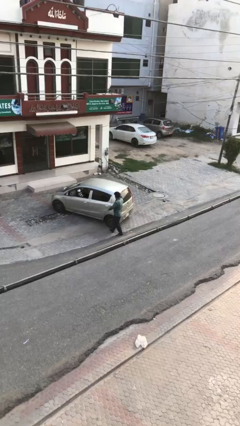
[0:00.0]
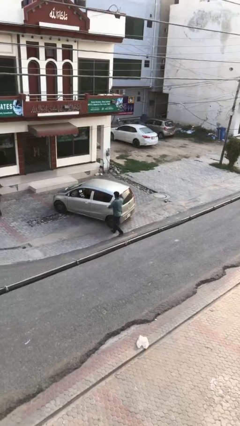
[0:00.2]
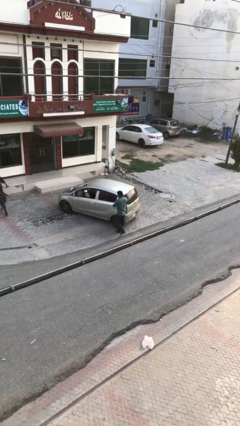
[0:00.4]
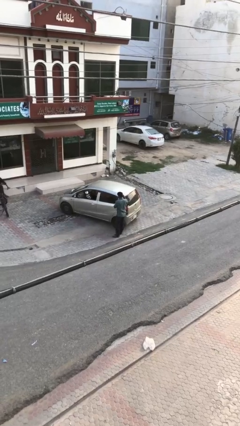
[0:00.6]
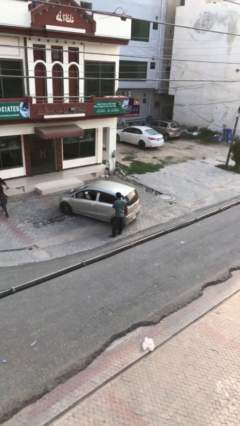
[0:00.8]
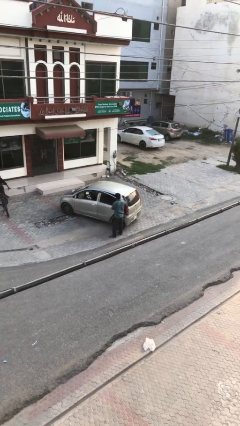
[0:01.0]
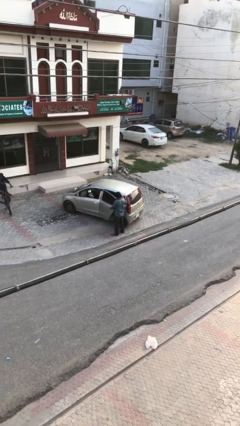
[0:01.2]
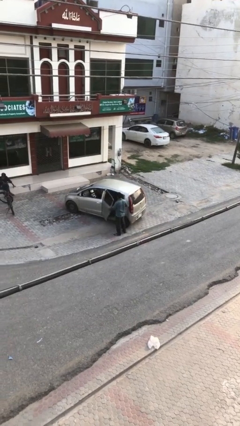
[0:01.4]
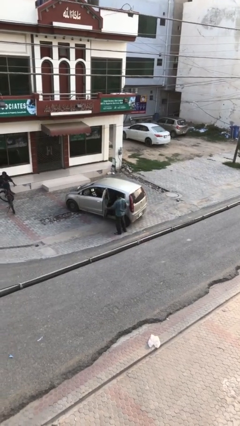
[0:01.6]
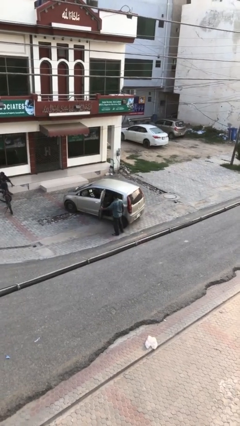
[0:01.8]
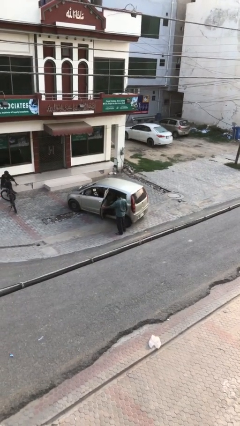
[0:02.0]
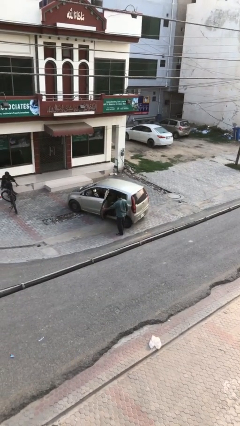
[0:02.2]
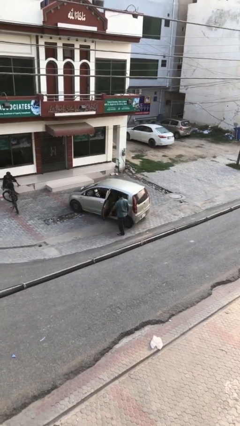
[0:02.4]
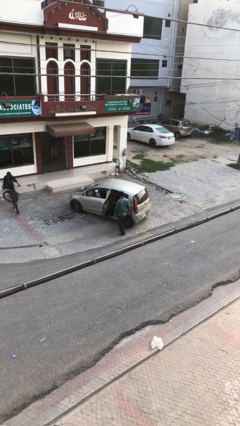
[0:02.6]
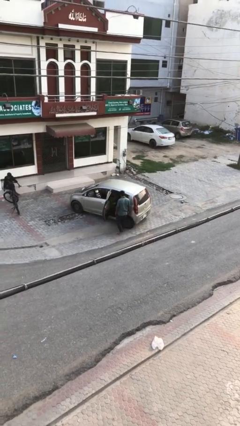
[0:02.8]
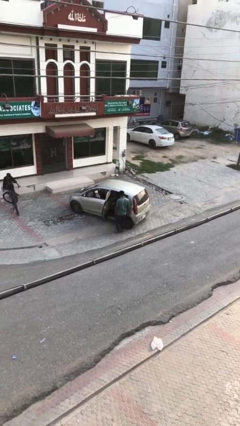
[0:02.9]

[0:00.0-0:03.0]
person opens car door

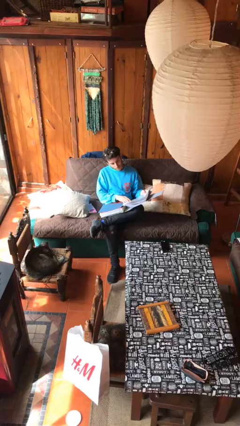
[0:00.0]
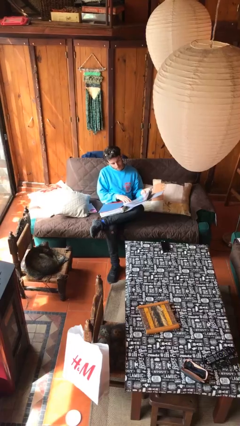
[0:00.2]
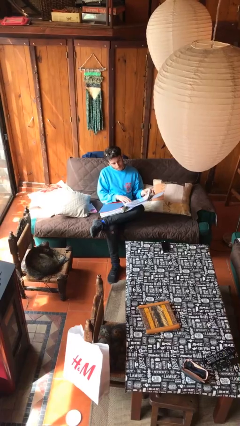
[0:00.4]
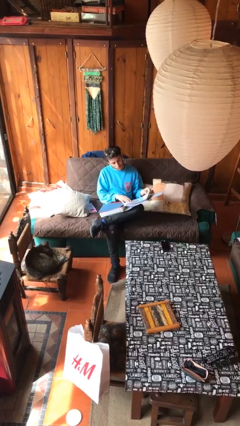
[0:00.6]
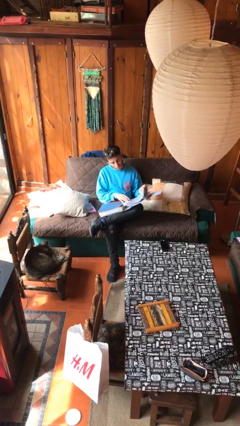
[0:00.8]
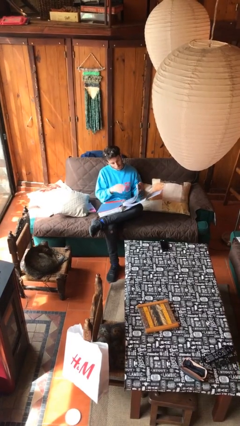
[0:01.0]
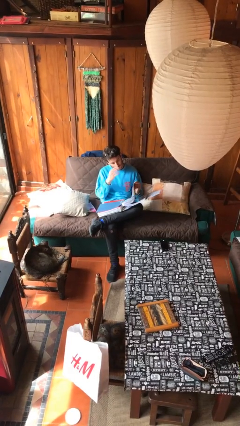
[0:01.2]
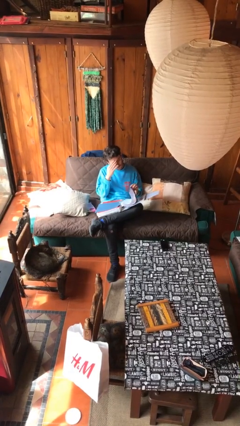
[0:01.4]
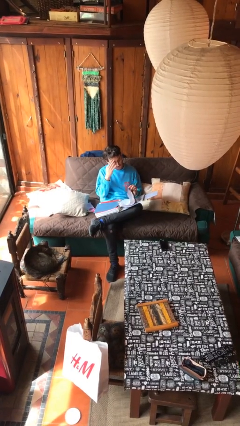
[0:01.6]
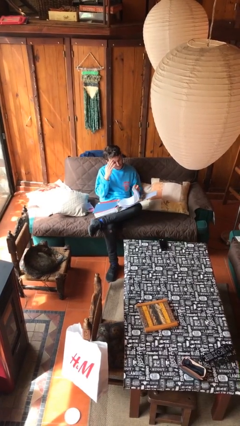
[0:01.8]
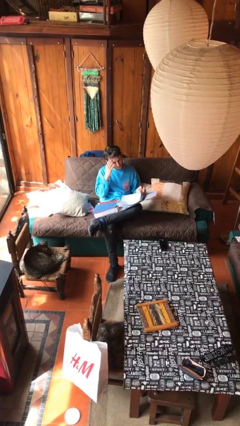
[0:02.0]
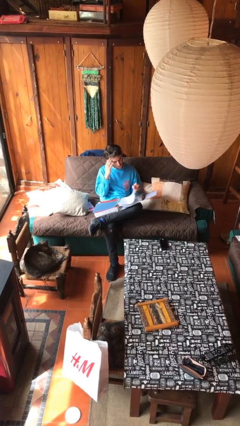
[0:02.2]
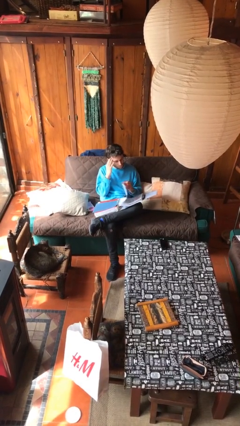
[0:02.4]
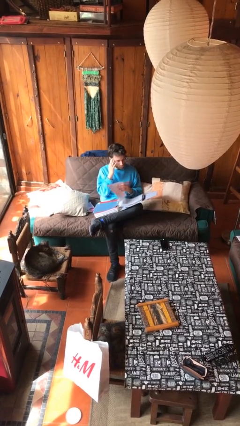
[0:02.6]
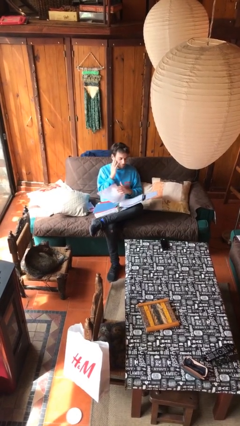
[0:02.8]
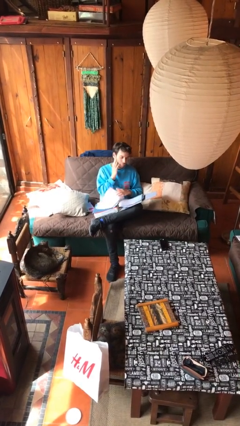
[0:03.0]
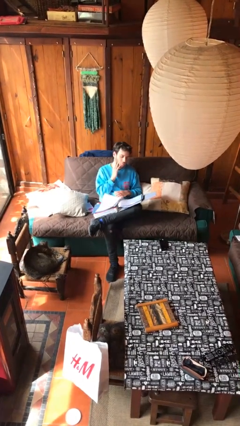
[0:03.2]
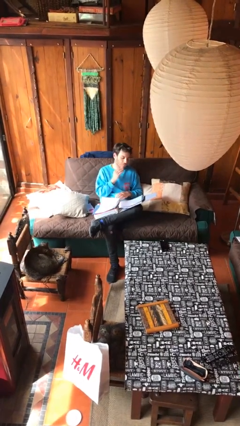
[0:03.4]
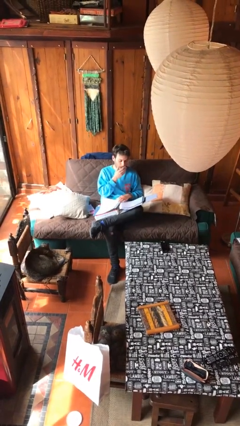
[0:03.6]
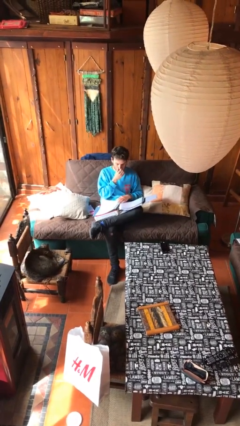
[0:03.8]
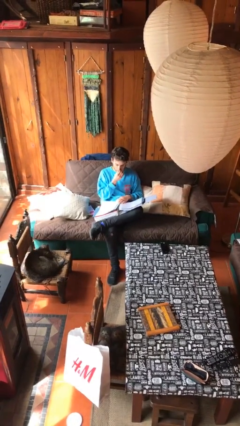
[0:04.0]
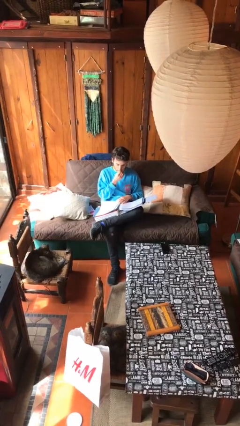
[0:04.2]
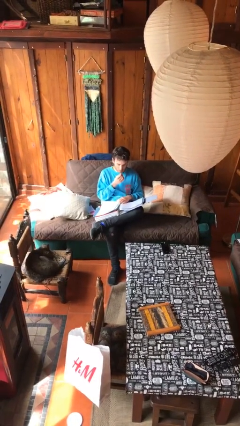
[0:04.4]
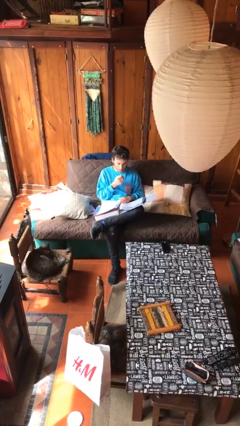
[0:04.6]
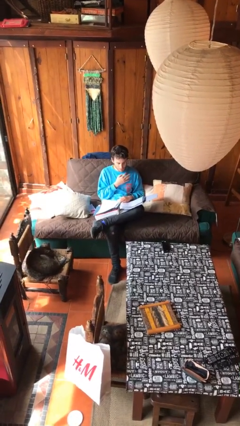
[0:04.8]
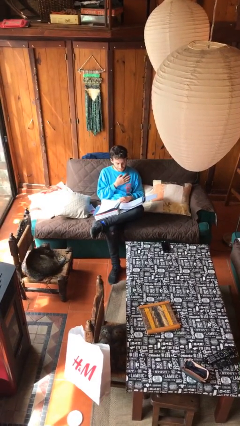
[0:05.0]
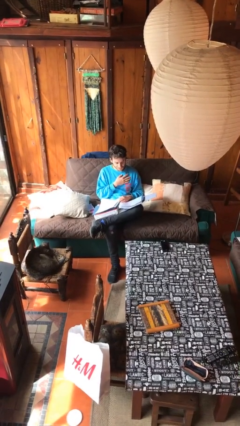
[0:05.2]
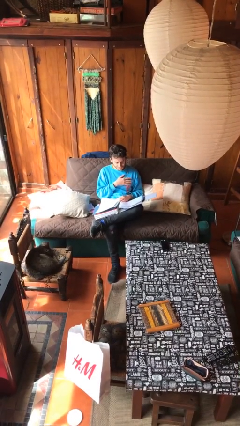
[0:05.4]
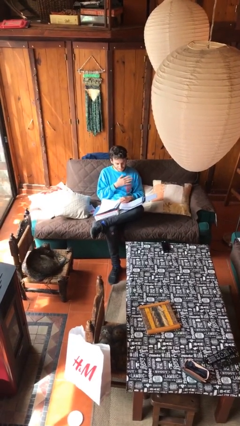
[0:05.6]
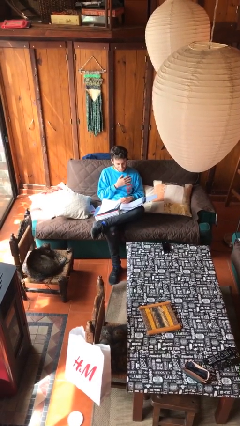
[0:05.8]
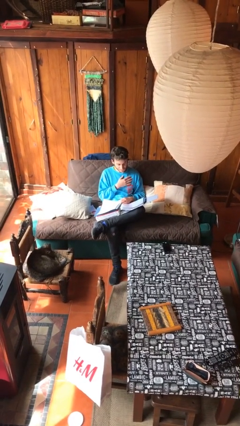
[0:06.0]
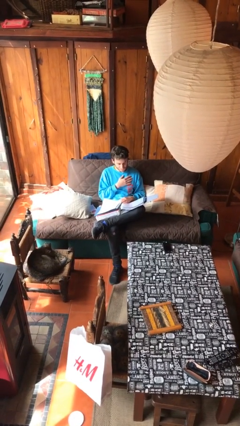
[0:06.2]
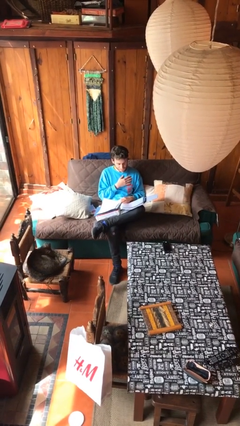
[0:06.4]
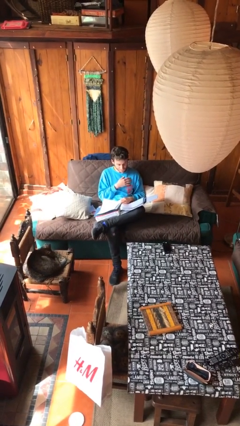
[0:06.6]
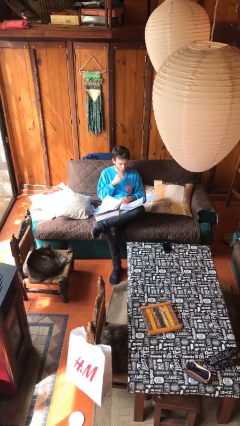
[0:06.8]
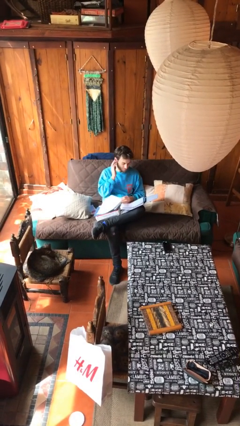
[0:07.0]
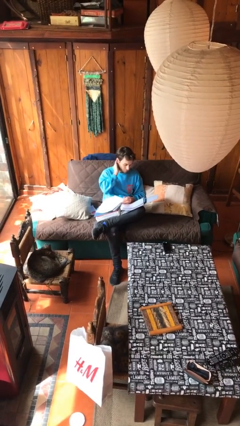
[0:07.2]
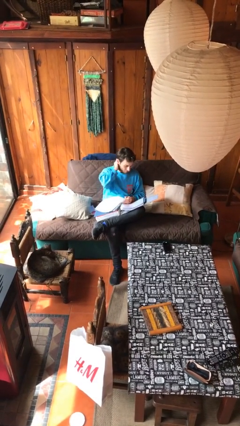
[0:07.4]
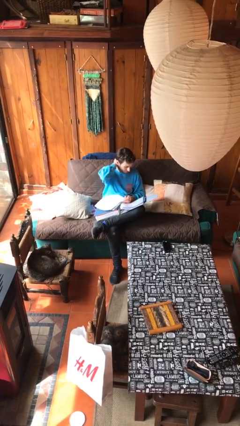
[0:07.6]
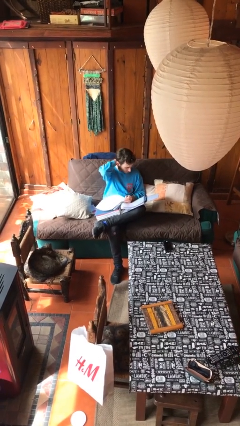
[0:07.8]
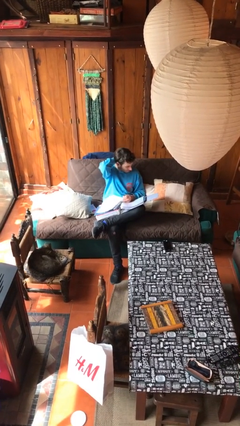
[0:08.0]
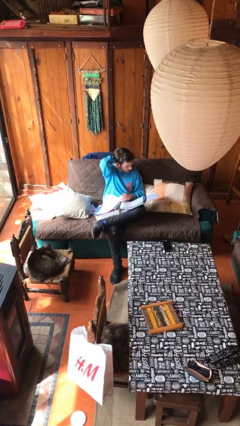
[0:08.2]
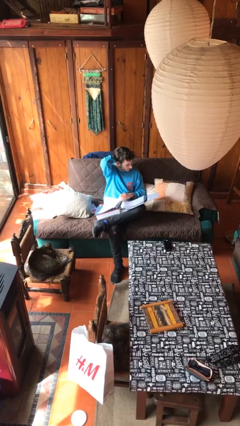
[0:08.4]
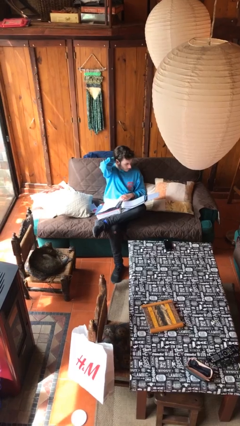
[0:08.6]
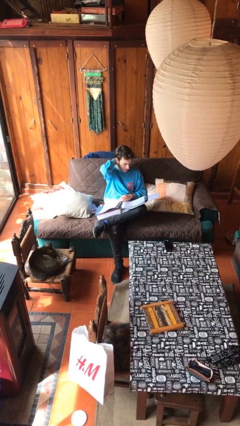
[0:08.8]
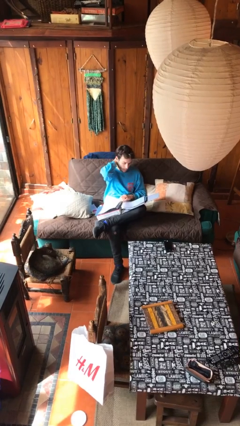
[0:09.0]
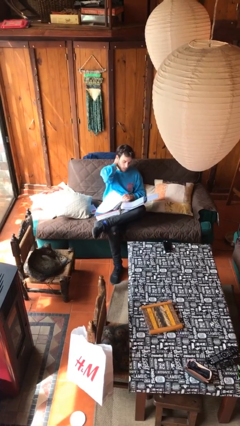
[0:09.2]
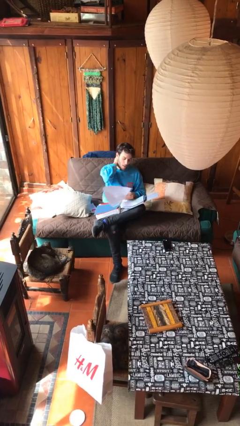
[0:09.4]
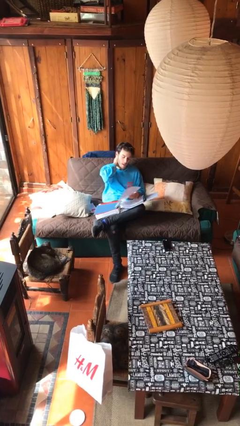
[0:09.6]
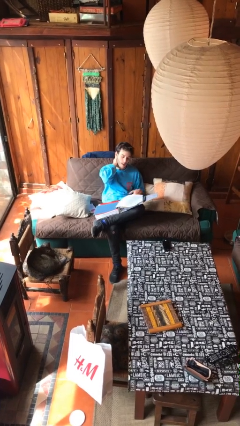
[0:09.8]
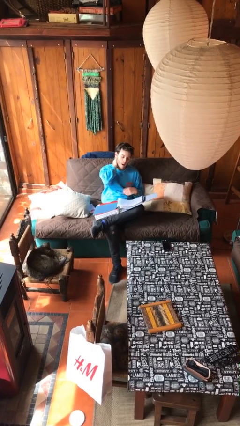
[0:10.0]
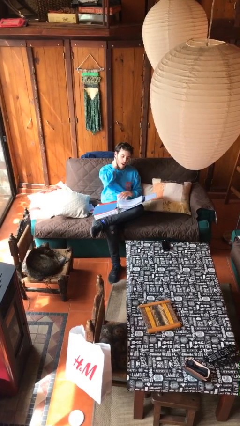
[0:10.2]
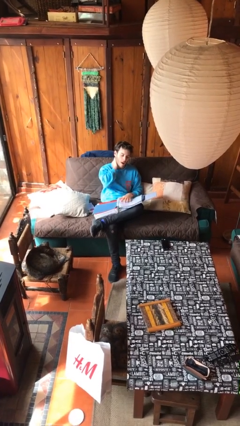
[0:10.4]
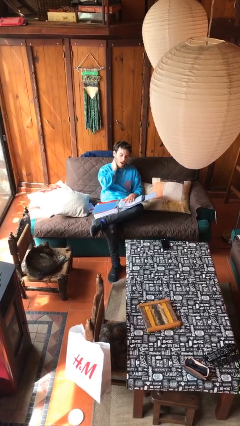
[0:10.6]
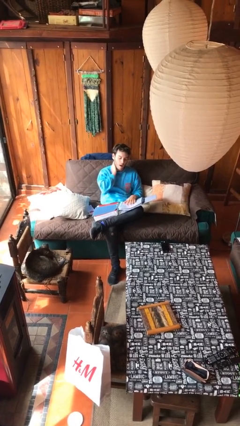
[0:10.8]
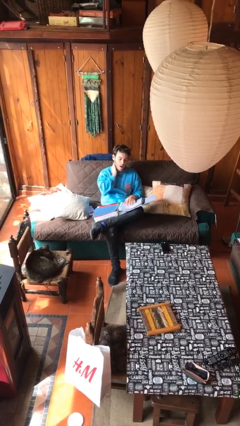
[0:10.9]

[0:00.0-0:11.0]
person reads document

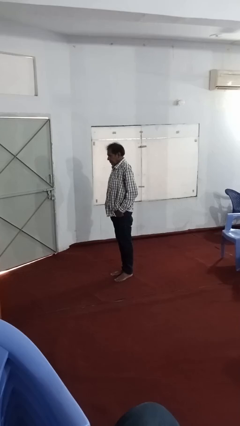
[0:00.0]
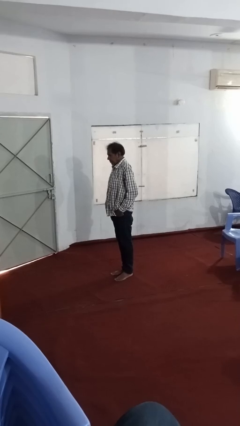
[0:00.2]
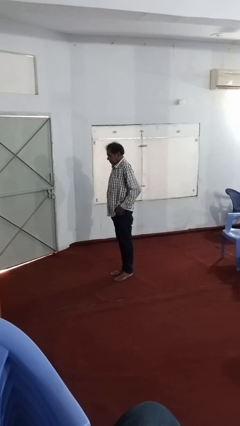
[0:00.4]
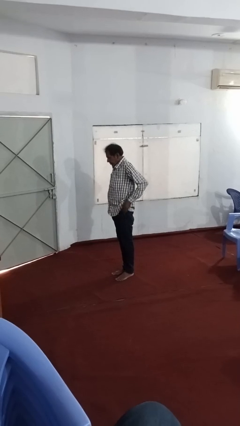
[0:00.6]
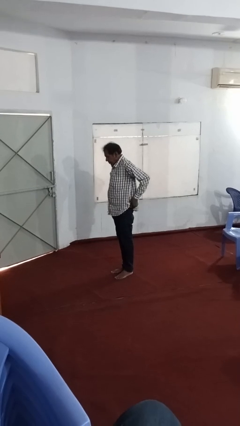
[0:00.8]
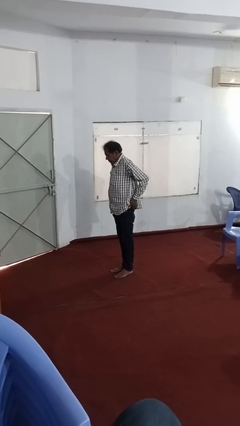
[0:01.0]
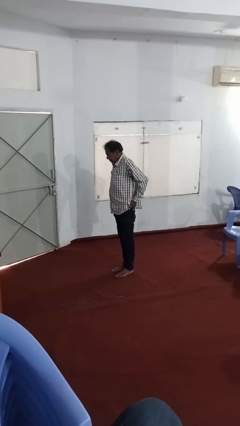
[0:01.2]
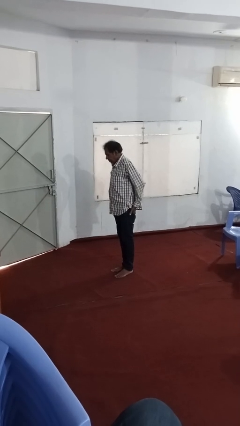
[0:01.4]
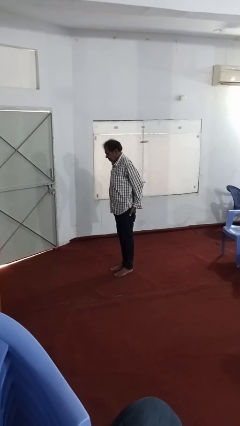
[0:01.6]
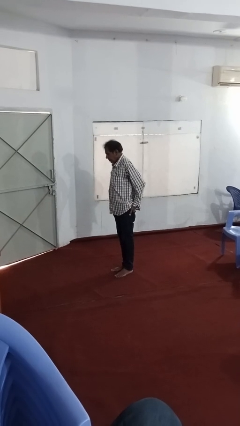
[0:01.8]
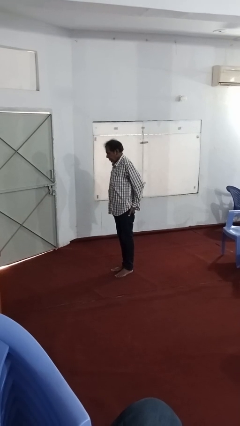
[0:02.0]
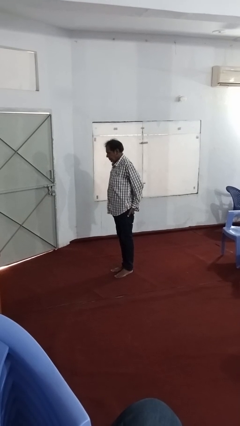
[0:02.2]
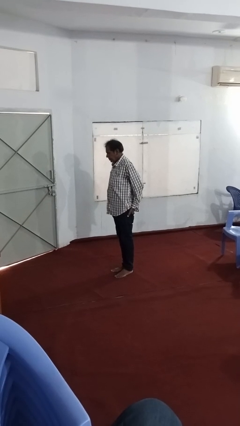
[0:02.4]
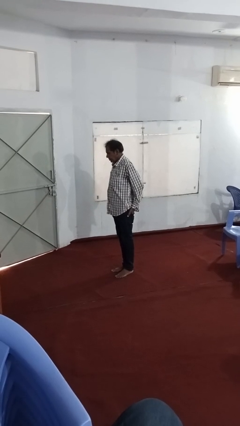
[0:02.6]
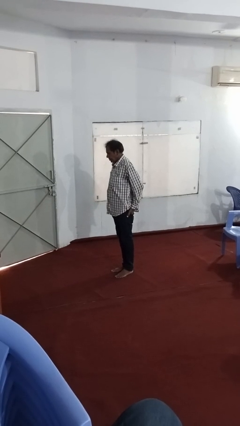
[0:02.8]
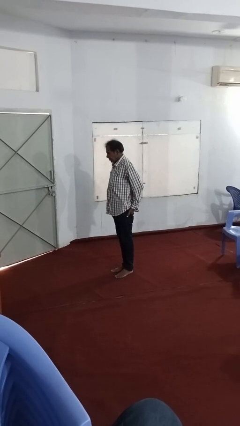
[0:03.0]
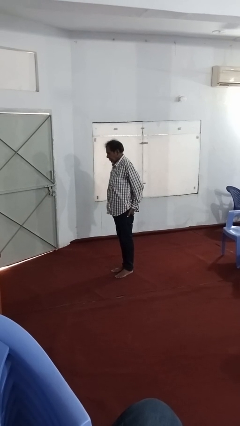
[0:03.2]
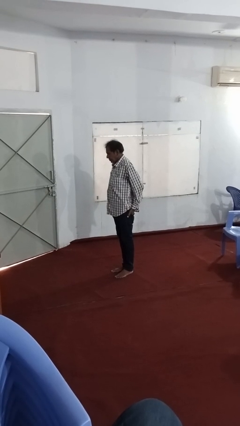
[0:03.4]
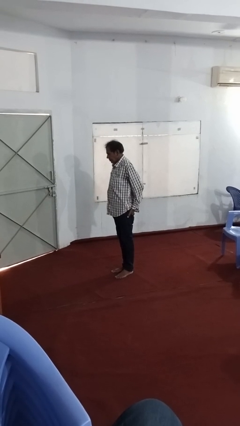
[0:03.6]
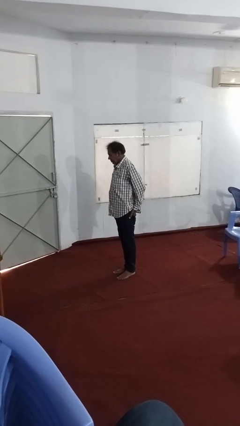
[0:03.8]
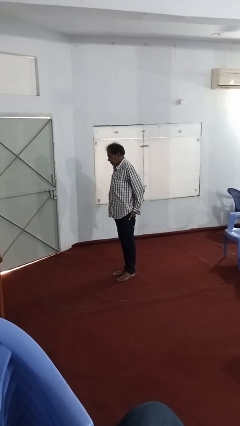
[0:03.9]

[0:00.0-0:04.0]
person puts hands in back pockets
